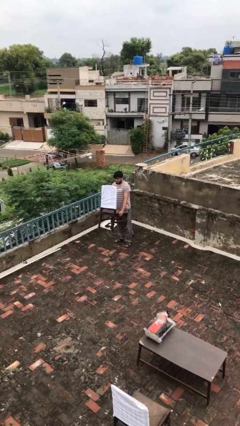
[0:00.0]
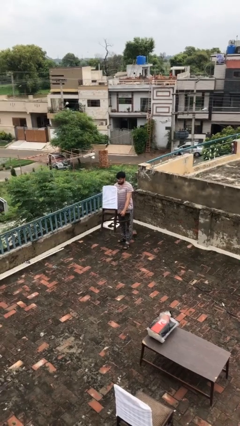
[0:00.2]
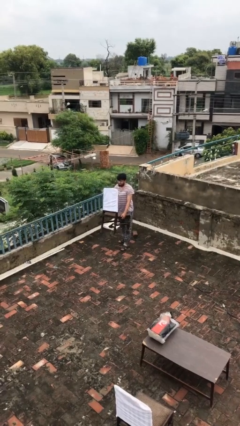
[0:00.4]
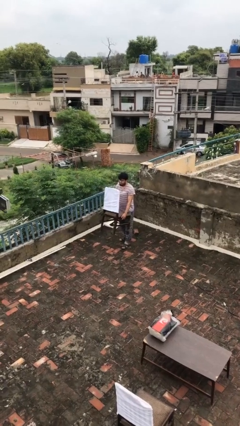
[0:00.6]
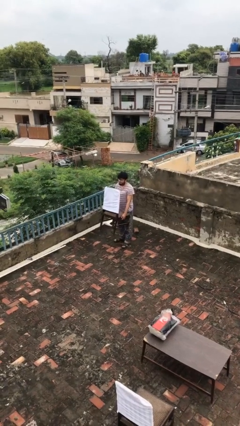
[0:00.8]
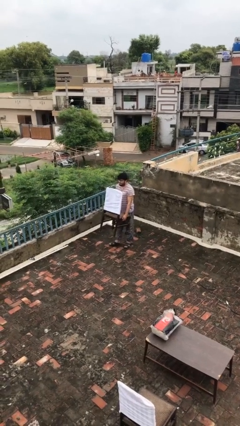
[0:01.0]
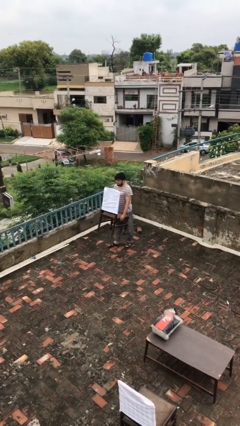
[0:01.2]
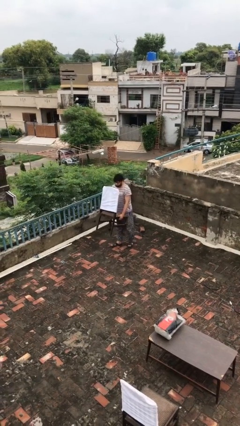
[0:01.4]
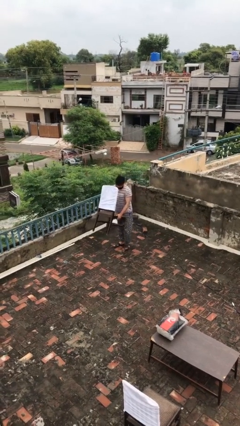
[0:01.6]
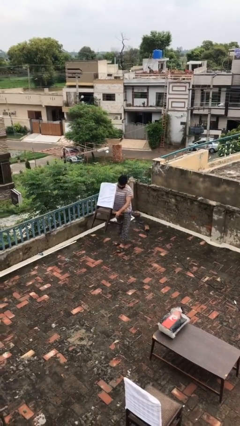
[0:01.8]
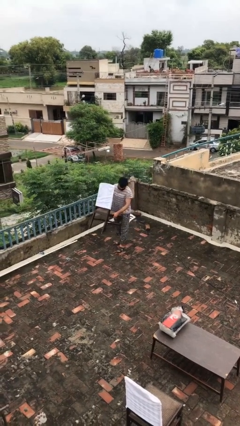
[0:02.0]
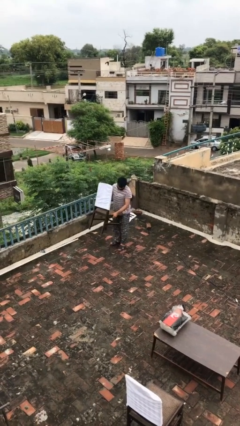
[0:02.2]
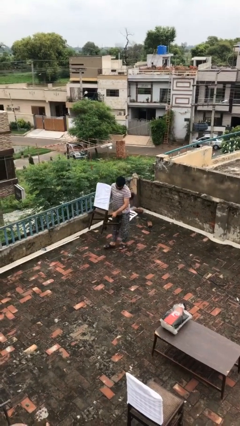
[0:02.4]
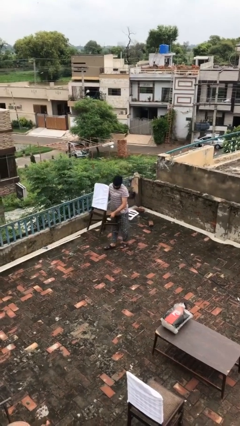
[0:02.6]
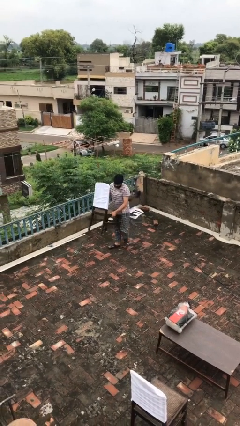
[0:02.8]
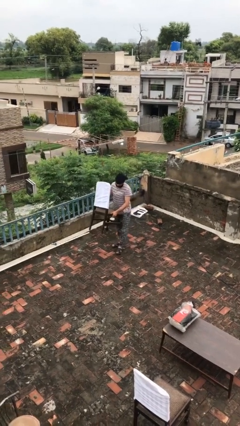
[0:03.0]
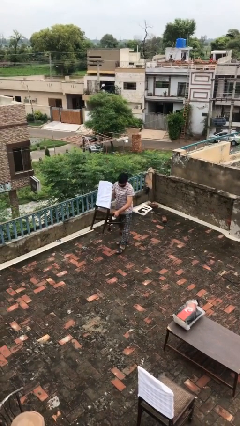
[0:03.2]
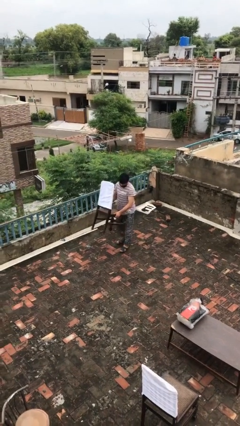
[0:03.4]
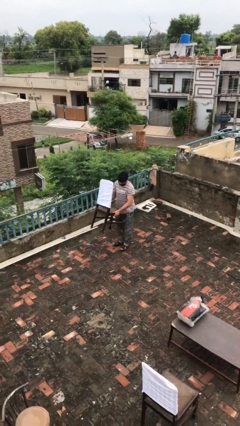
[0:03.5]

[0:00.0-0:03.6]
person carries heavy object

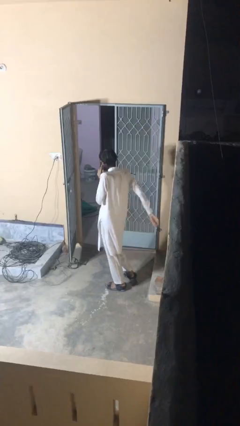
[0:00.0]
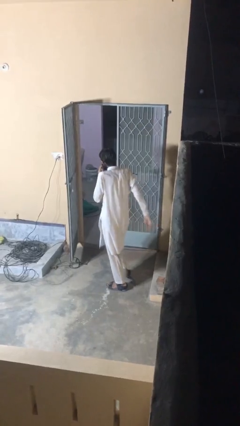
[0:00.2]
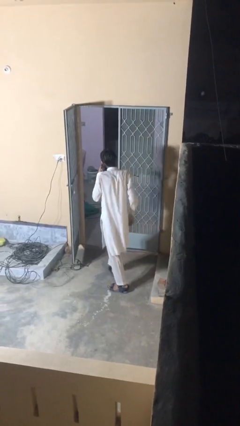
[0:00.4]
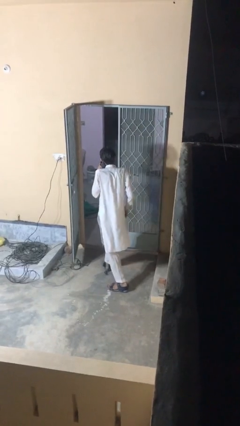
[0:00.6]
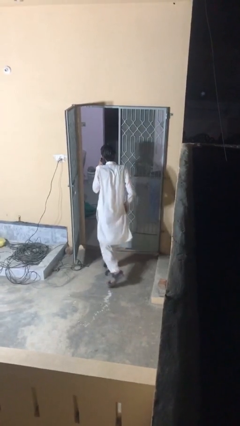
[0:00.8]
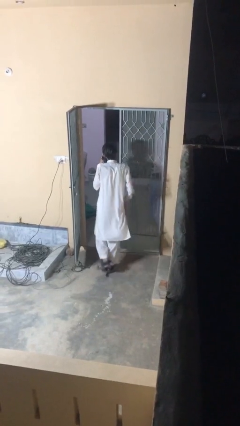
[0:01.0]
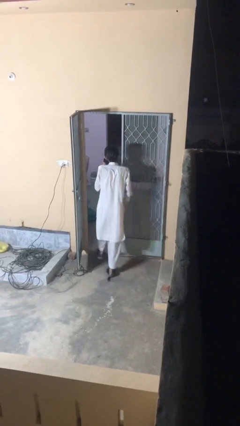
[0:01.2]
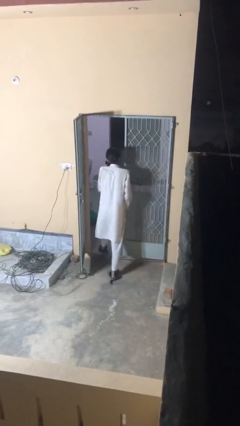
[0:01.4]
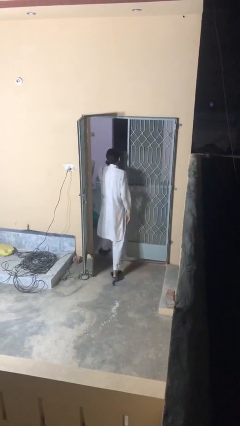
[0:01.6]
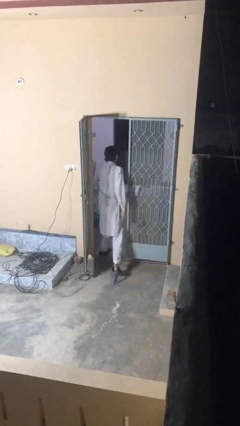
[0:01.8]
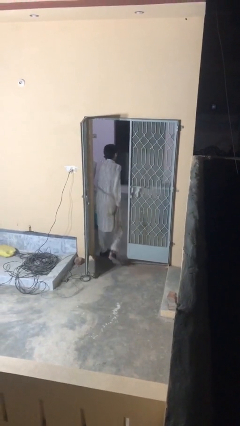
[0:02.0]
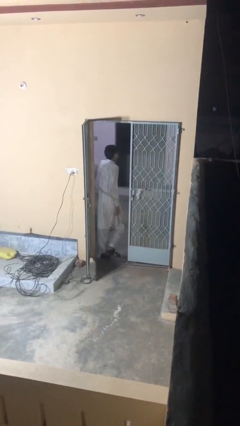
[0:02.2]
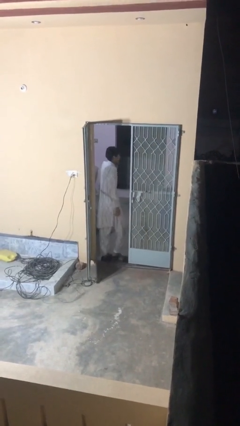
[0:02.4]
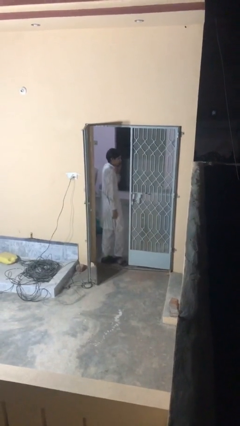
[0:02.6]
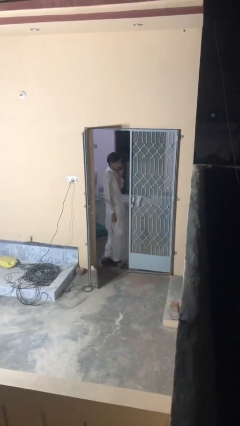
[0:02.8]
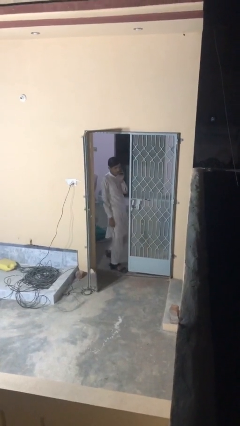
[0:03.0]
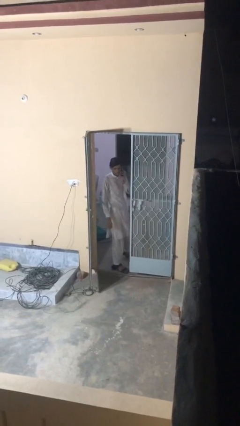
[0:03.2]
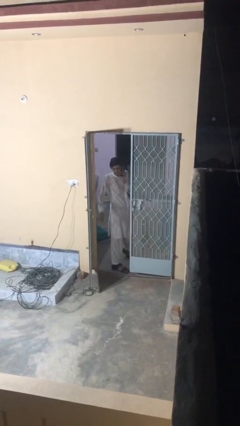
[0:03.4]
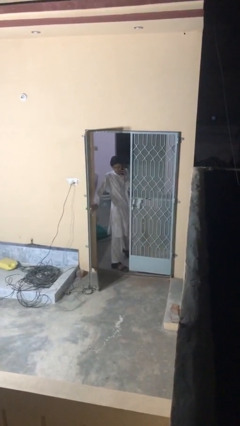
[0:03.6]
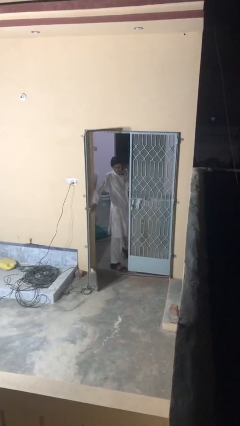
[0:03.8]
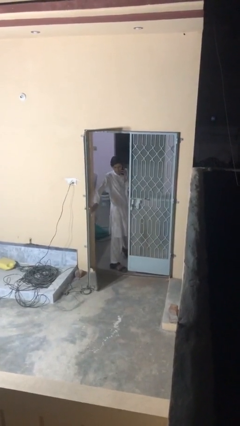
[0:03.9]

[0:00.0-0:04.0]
person exits scene through structure

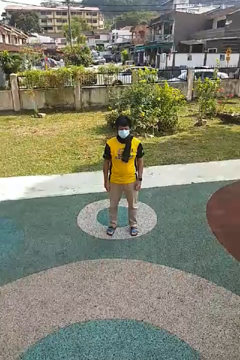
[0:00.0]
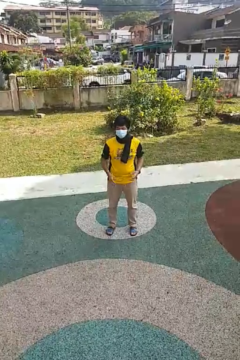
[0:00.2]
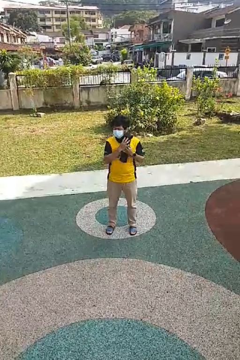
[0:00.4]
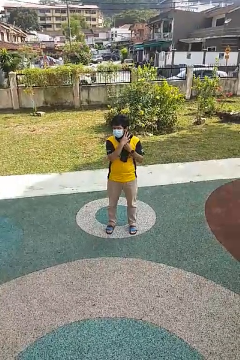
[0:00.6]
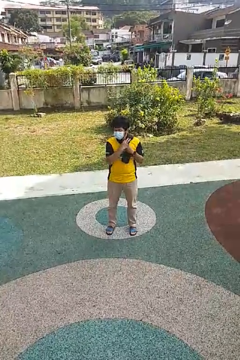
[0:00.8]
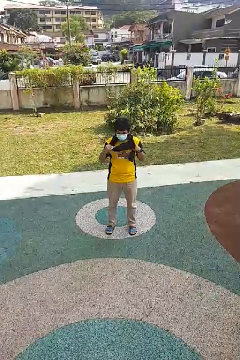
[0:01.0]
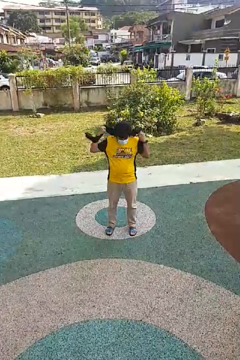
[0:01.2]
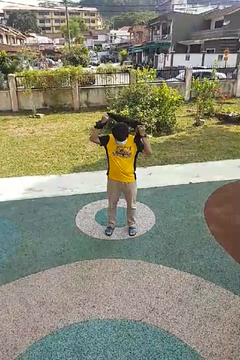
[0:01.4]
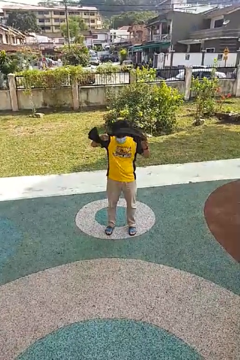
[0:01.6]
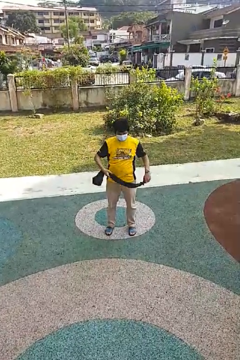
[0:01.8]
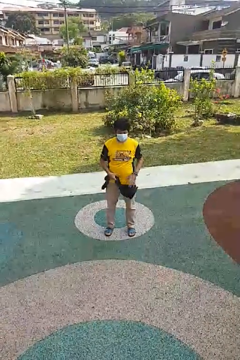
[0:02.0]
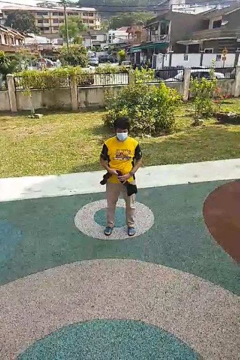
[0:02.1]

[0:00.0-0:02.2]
person takes off scarf

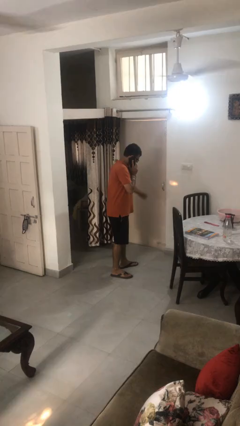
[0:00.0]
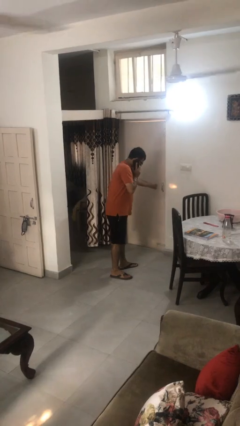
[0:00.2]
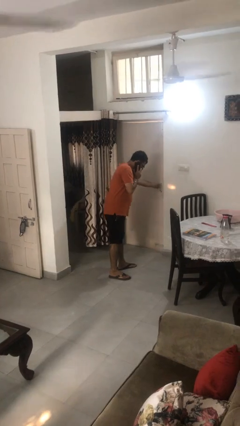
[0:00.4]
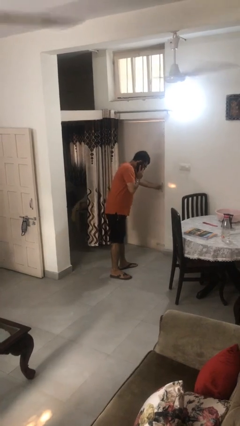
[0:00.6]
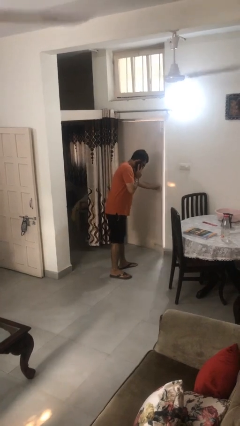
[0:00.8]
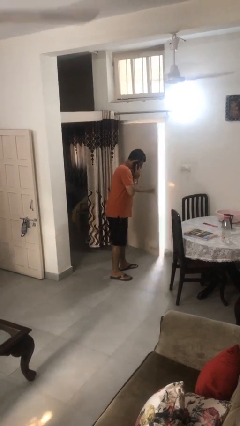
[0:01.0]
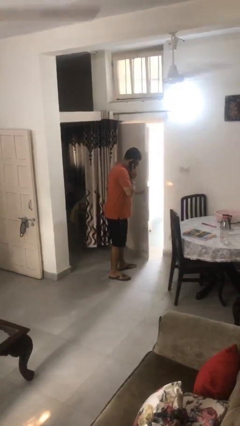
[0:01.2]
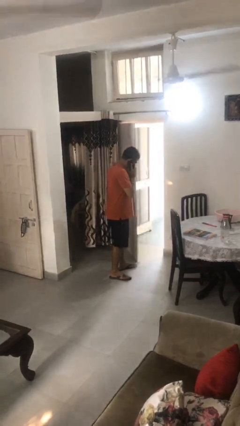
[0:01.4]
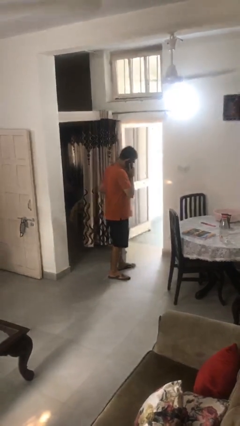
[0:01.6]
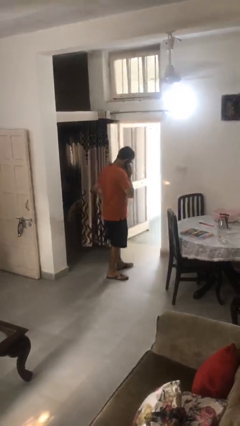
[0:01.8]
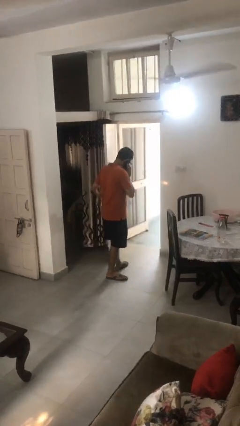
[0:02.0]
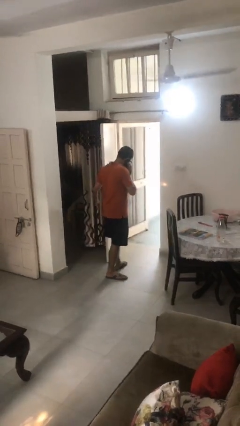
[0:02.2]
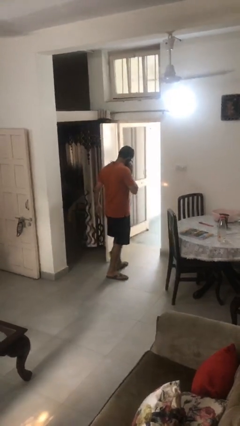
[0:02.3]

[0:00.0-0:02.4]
person opens facility door

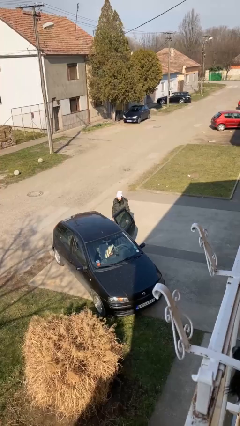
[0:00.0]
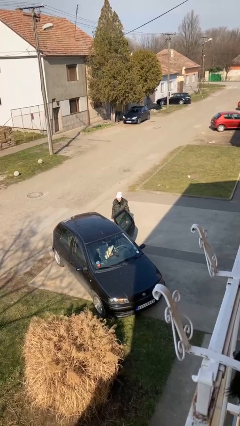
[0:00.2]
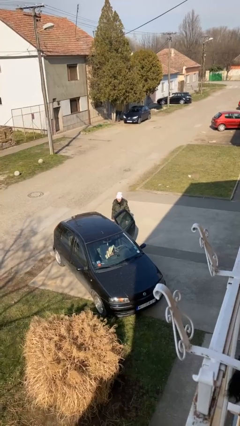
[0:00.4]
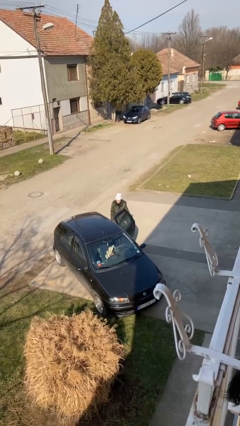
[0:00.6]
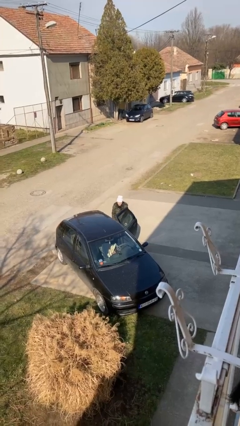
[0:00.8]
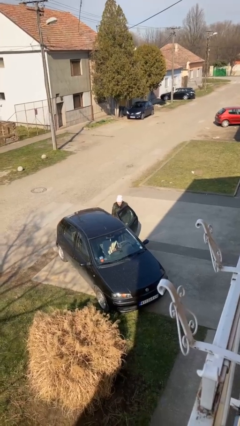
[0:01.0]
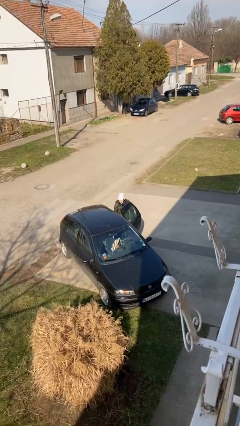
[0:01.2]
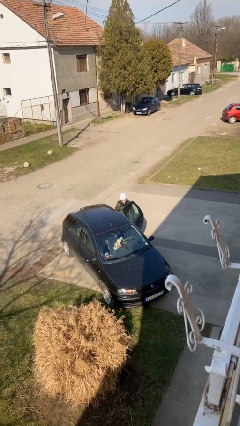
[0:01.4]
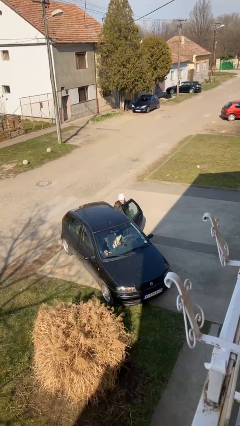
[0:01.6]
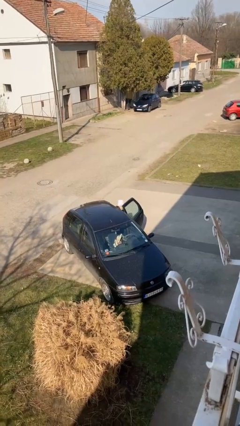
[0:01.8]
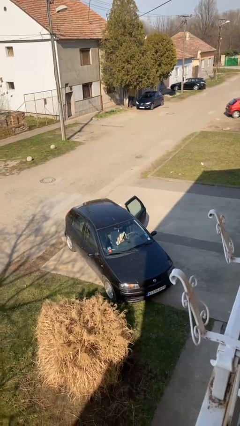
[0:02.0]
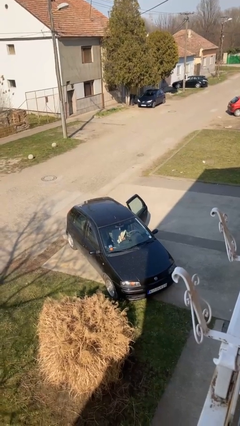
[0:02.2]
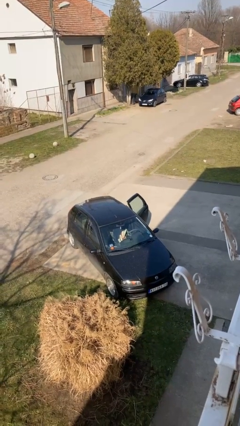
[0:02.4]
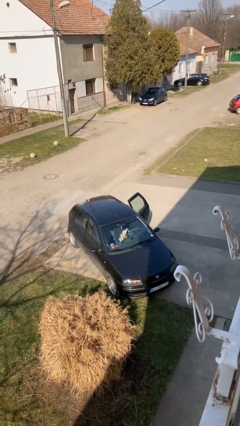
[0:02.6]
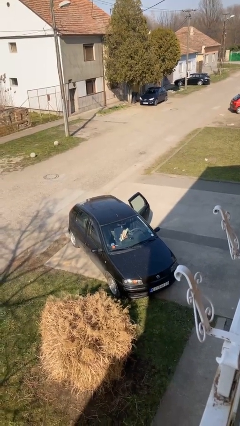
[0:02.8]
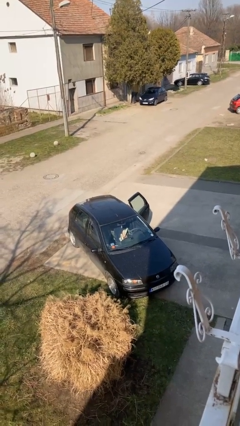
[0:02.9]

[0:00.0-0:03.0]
person enters car

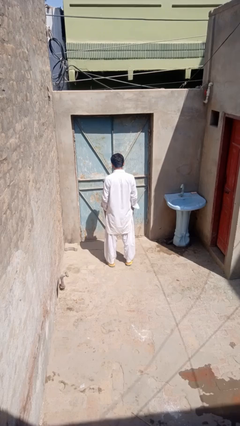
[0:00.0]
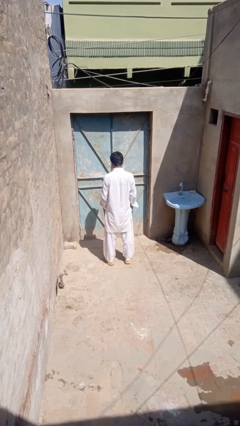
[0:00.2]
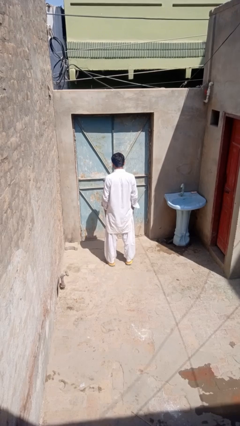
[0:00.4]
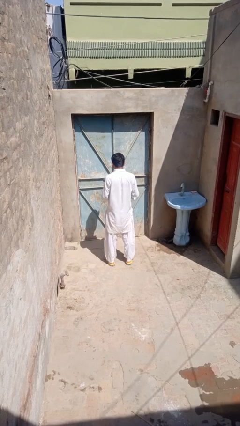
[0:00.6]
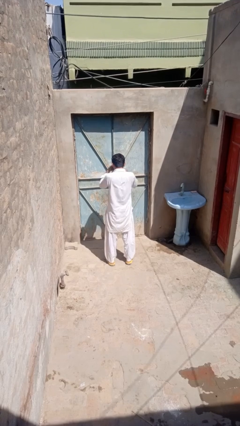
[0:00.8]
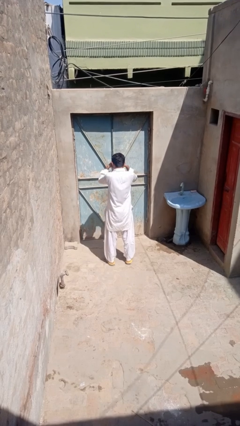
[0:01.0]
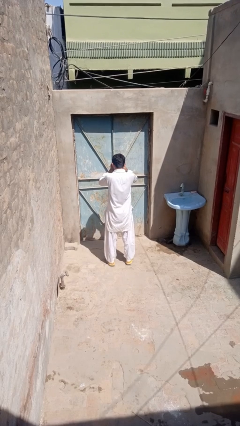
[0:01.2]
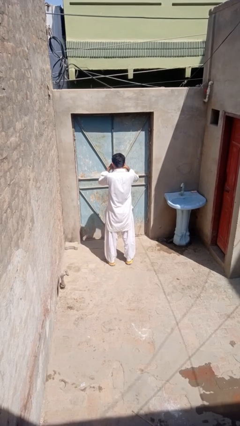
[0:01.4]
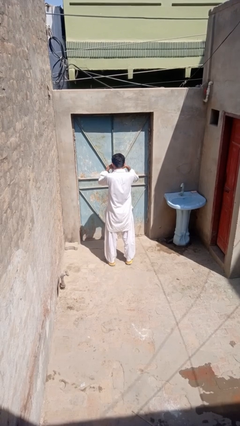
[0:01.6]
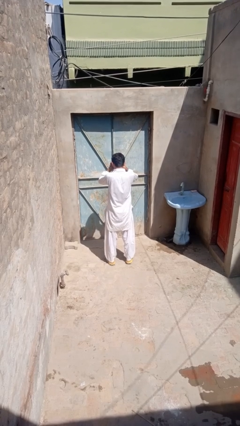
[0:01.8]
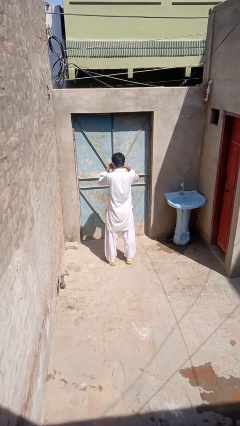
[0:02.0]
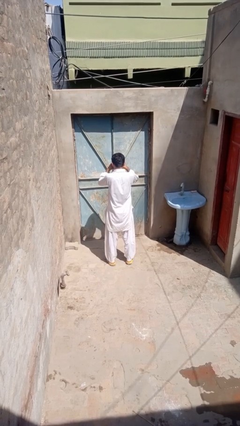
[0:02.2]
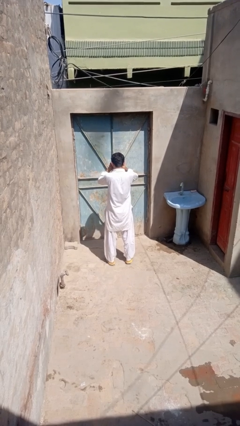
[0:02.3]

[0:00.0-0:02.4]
person rubs eyes

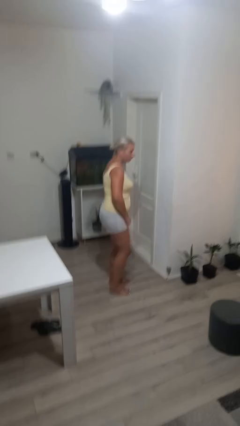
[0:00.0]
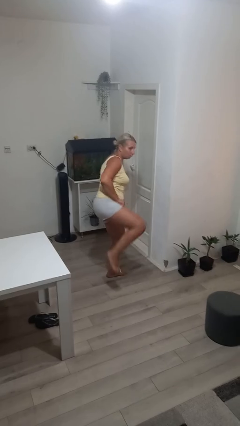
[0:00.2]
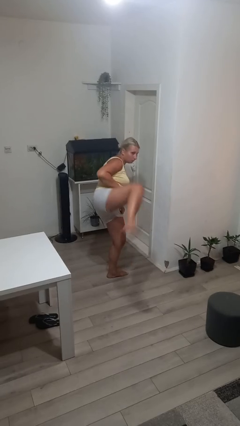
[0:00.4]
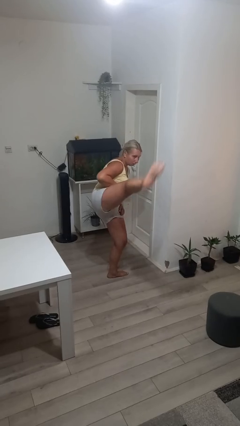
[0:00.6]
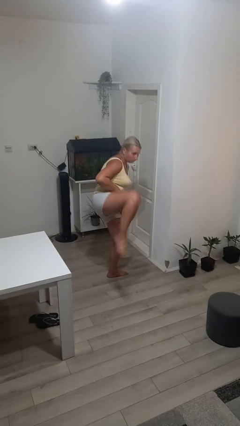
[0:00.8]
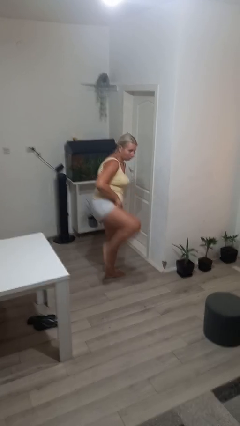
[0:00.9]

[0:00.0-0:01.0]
person karate kicks
